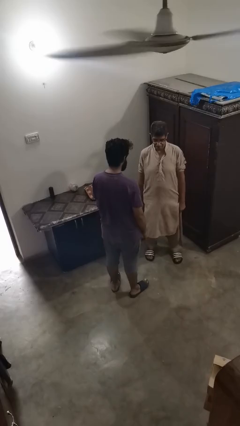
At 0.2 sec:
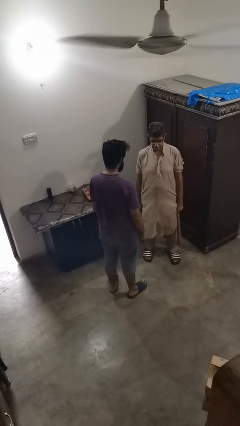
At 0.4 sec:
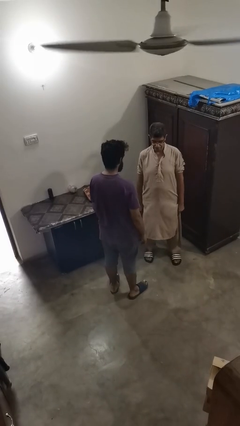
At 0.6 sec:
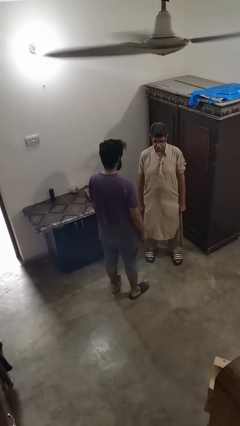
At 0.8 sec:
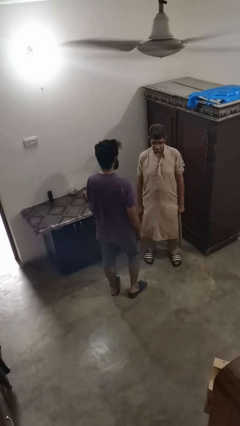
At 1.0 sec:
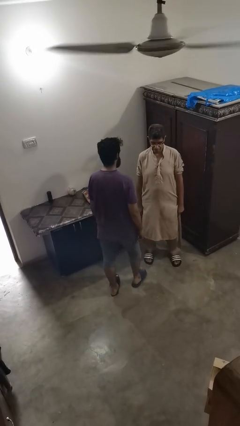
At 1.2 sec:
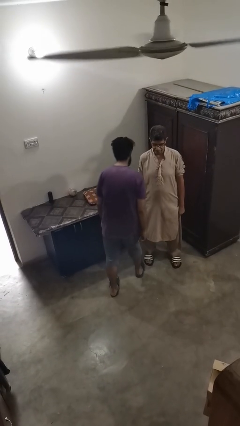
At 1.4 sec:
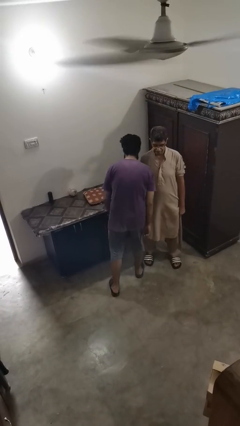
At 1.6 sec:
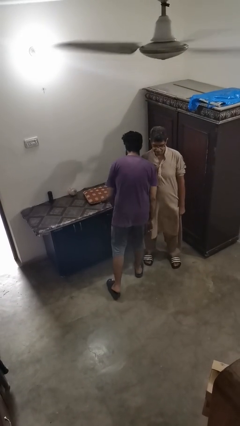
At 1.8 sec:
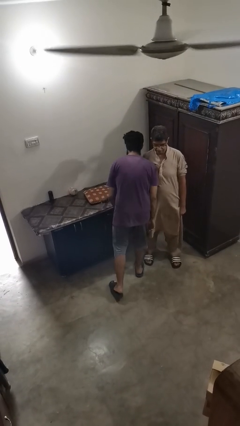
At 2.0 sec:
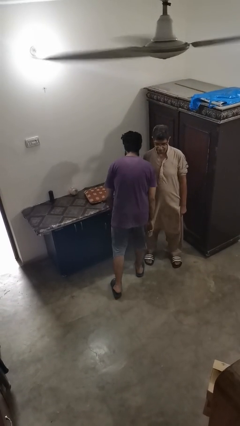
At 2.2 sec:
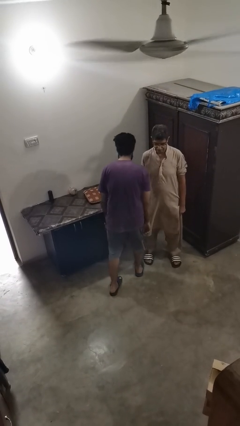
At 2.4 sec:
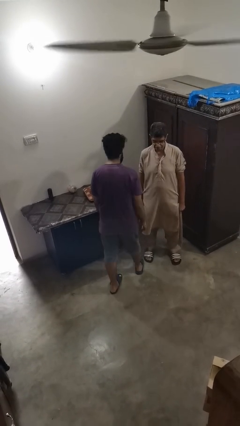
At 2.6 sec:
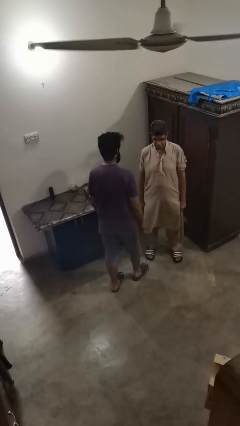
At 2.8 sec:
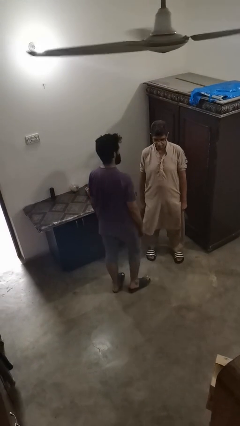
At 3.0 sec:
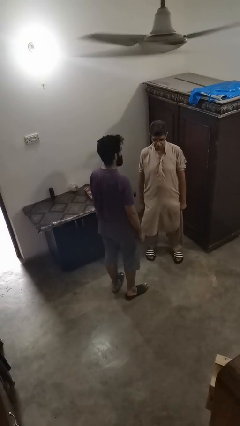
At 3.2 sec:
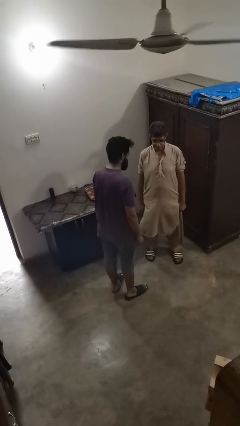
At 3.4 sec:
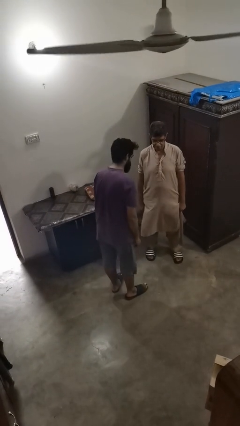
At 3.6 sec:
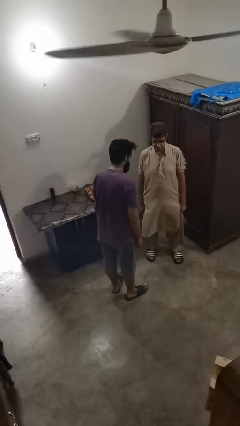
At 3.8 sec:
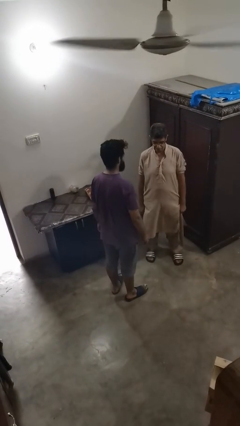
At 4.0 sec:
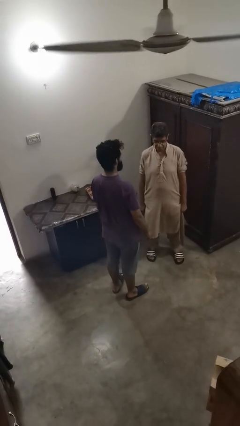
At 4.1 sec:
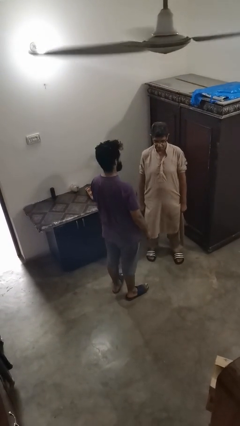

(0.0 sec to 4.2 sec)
person bumps into person

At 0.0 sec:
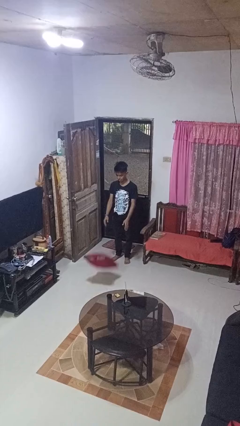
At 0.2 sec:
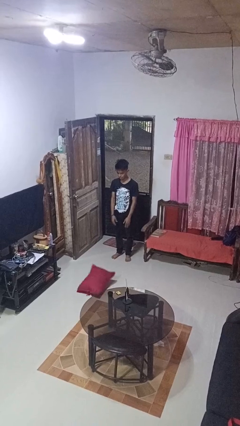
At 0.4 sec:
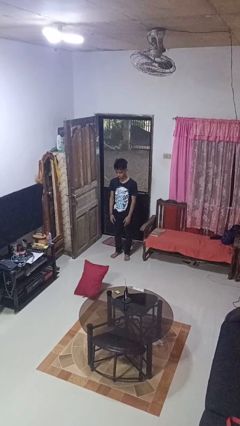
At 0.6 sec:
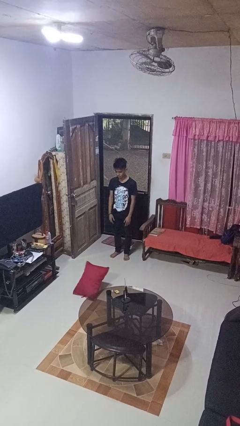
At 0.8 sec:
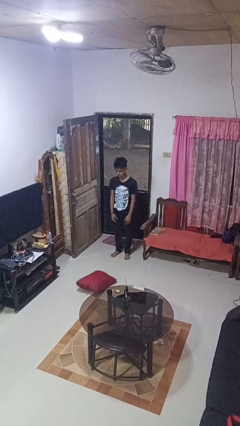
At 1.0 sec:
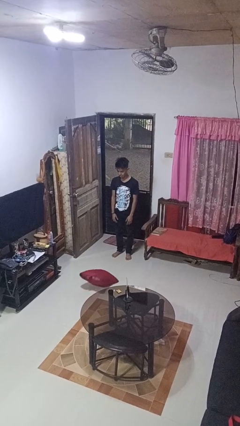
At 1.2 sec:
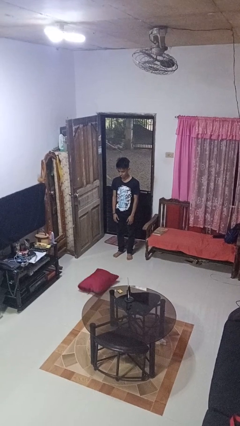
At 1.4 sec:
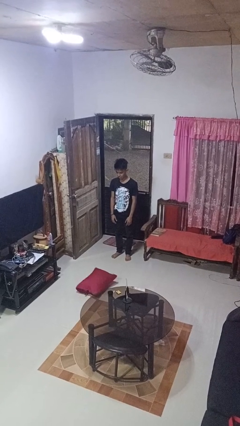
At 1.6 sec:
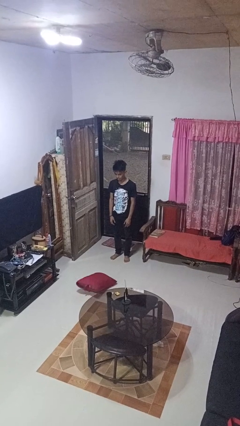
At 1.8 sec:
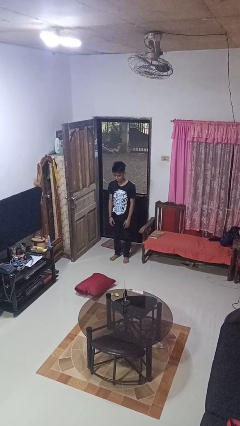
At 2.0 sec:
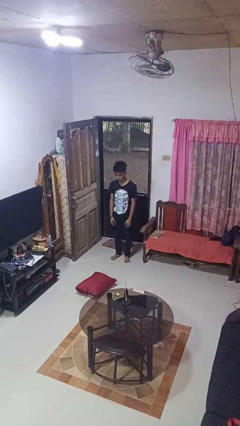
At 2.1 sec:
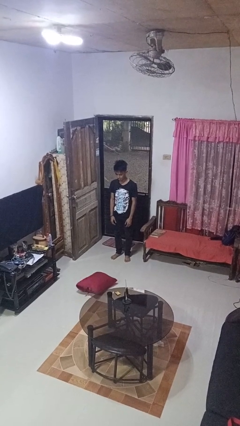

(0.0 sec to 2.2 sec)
person throws object to ground

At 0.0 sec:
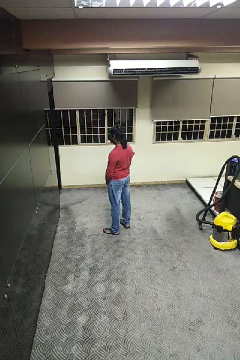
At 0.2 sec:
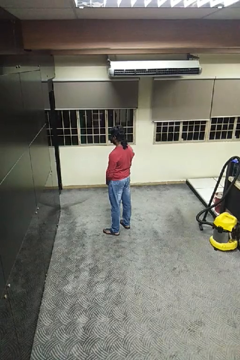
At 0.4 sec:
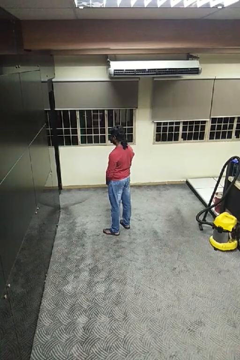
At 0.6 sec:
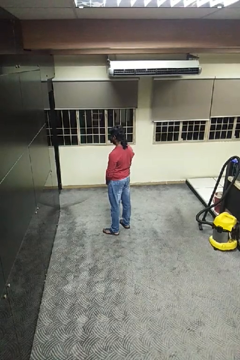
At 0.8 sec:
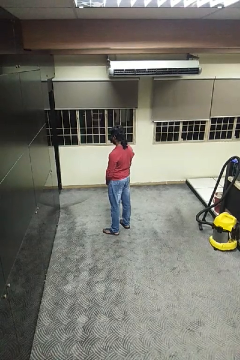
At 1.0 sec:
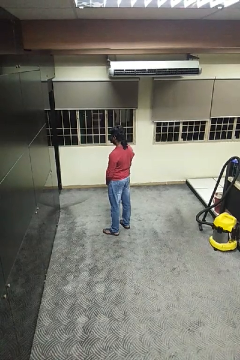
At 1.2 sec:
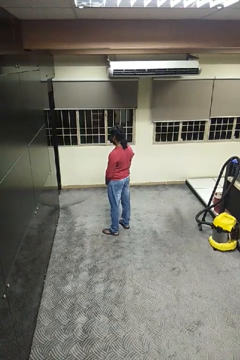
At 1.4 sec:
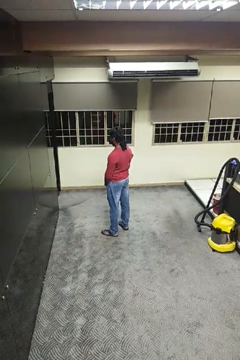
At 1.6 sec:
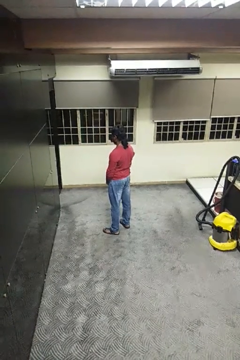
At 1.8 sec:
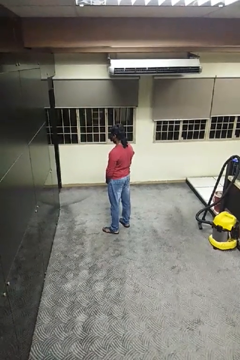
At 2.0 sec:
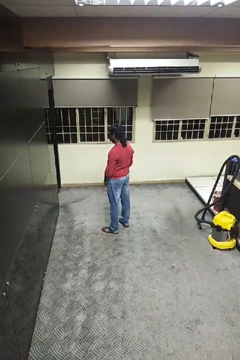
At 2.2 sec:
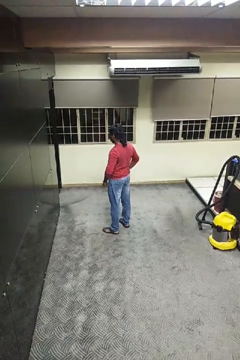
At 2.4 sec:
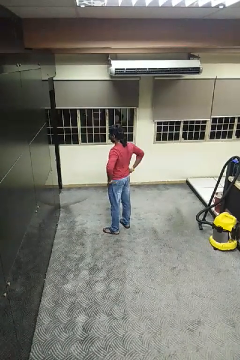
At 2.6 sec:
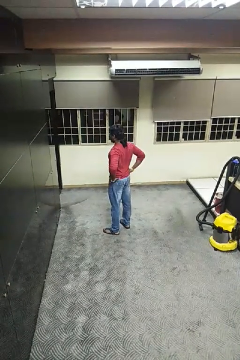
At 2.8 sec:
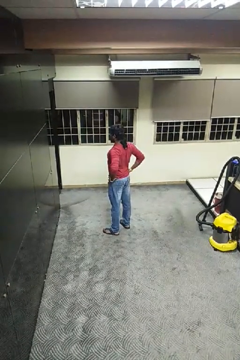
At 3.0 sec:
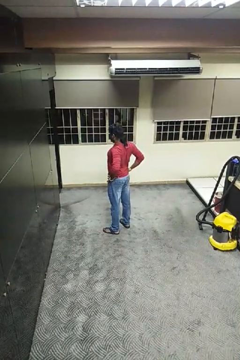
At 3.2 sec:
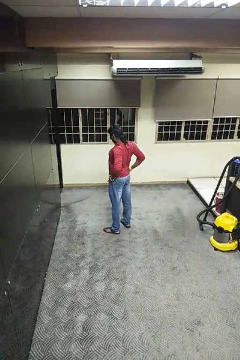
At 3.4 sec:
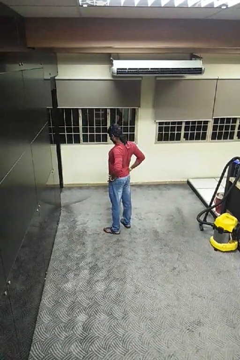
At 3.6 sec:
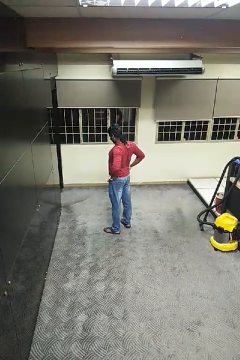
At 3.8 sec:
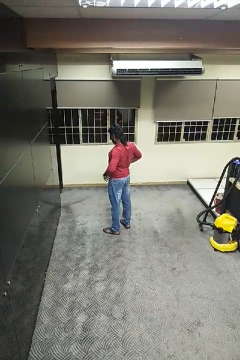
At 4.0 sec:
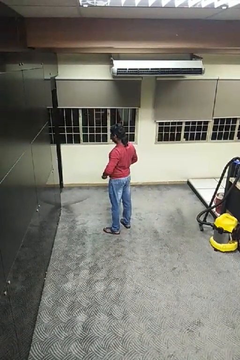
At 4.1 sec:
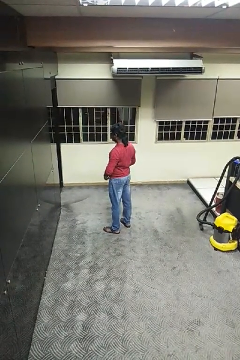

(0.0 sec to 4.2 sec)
person stretches back

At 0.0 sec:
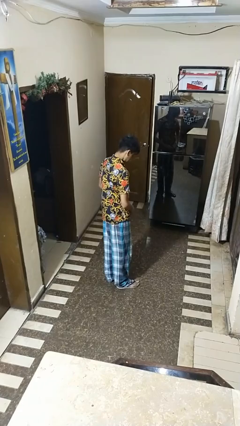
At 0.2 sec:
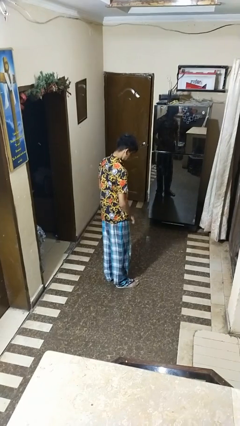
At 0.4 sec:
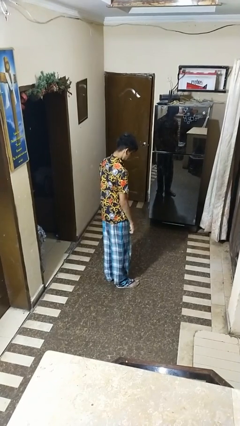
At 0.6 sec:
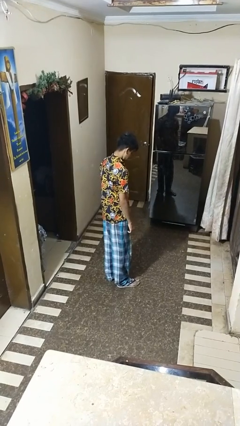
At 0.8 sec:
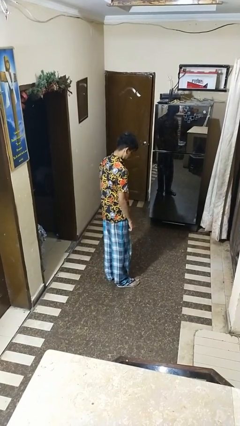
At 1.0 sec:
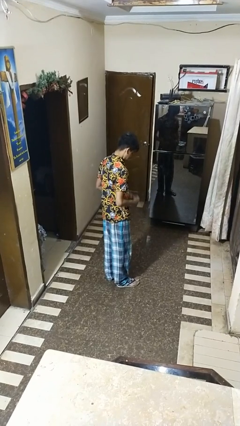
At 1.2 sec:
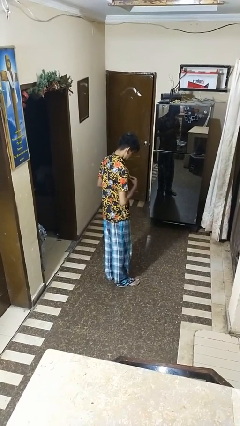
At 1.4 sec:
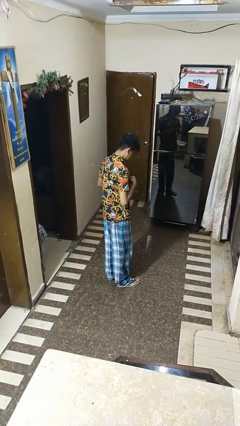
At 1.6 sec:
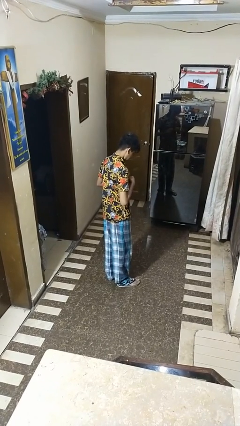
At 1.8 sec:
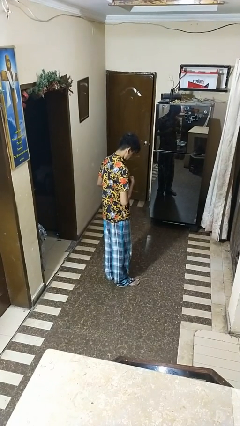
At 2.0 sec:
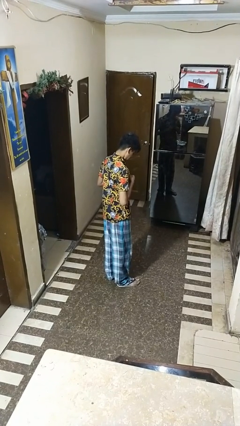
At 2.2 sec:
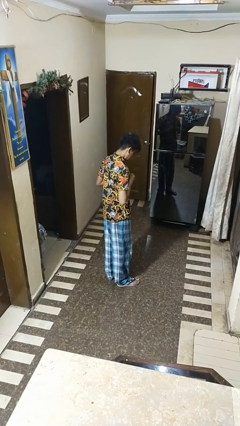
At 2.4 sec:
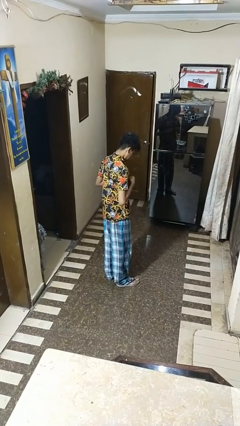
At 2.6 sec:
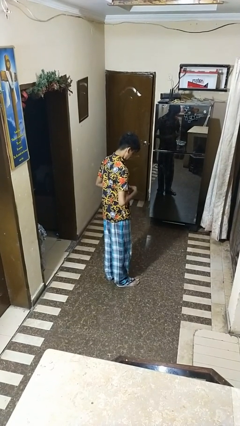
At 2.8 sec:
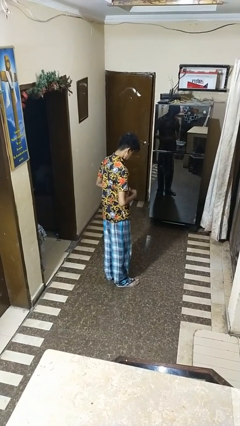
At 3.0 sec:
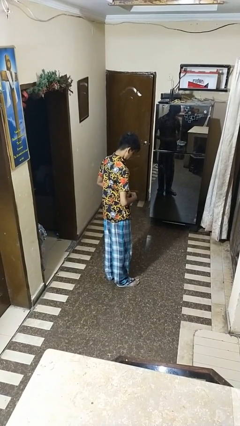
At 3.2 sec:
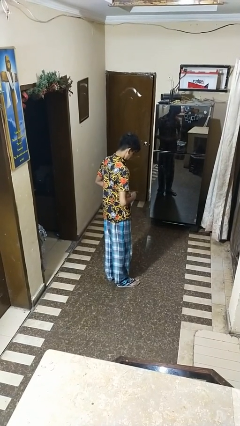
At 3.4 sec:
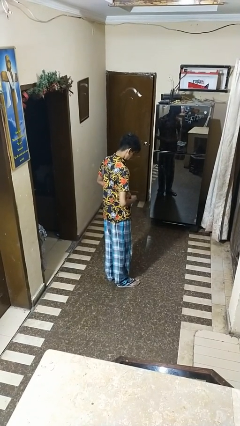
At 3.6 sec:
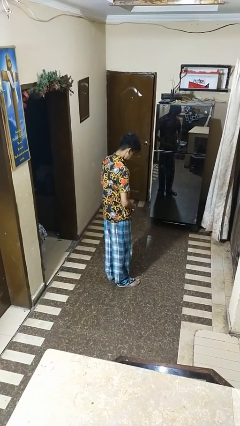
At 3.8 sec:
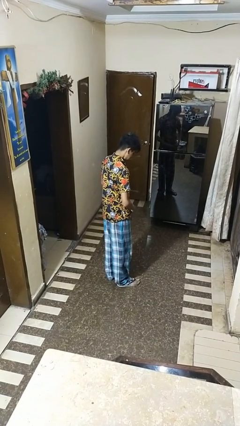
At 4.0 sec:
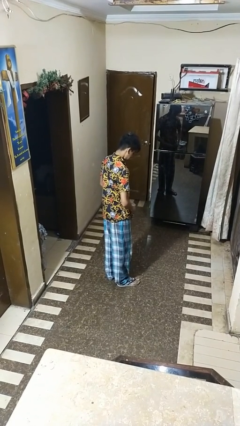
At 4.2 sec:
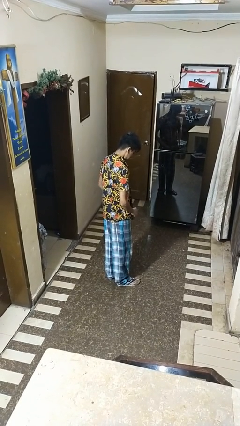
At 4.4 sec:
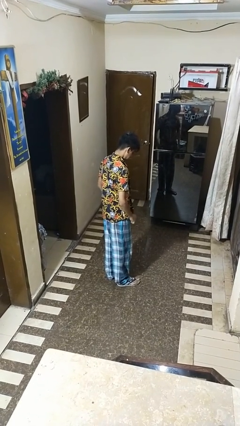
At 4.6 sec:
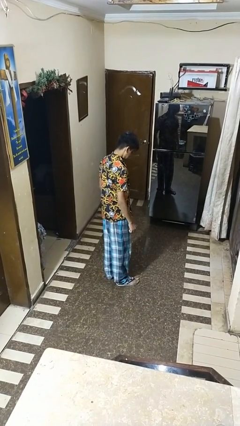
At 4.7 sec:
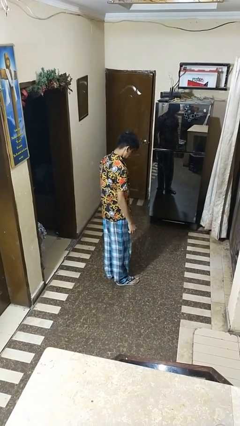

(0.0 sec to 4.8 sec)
person unbuttons shirt

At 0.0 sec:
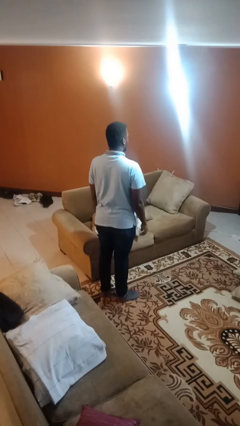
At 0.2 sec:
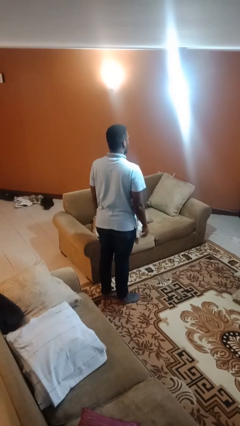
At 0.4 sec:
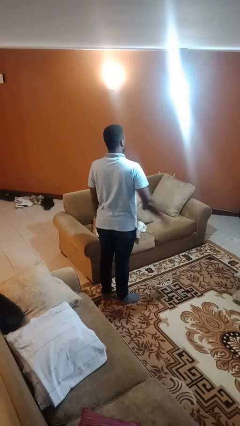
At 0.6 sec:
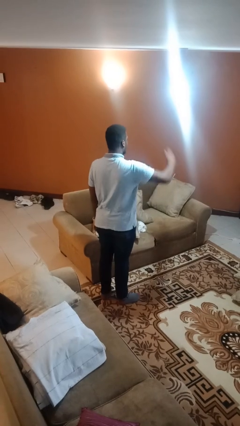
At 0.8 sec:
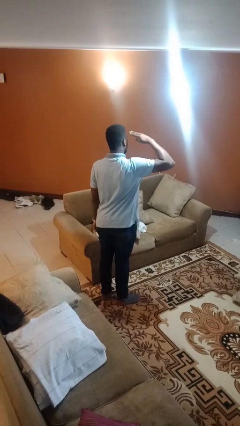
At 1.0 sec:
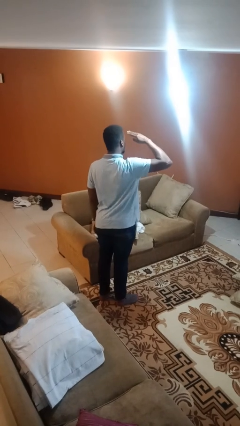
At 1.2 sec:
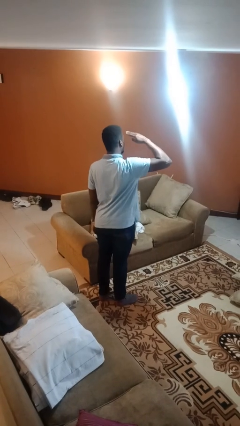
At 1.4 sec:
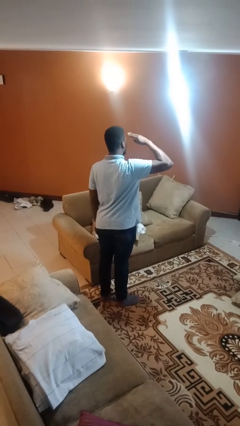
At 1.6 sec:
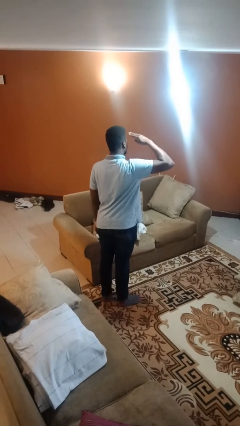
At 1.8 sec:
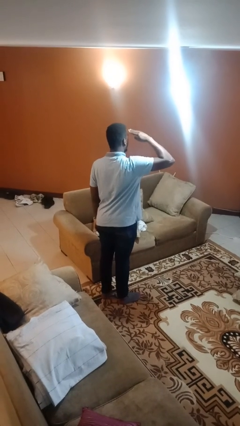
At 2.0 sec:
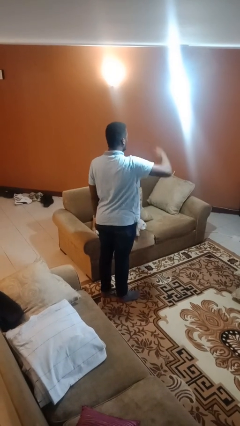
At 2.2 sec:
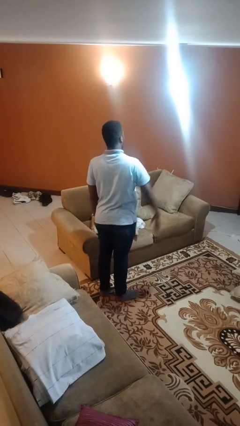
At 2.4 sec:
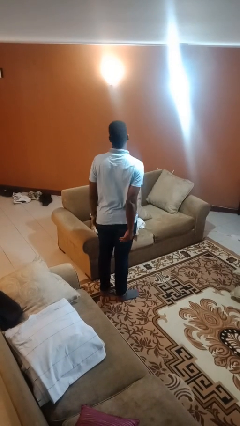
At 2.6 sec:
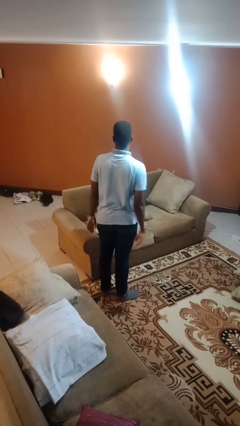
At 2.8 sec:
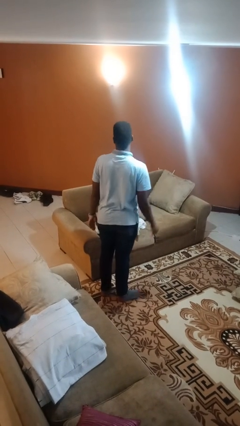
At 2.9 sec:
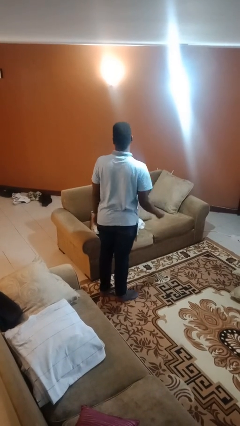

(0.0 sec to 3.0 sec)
person salutes
